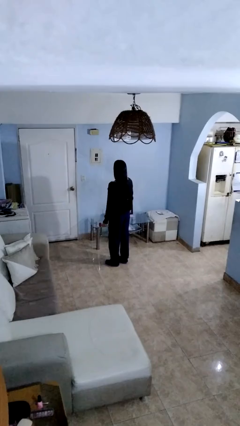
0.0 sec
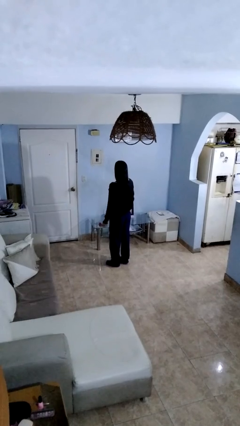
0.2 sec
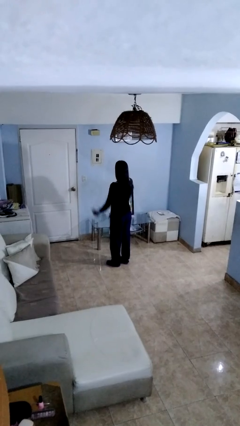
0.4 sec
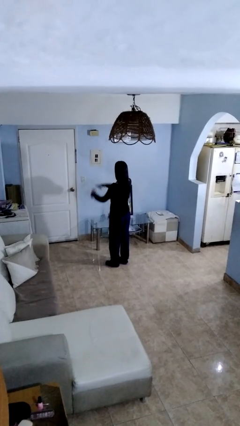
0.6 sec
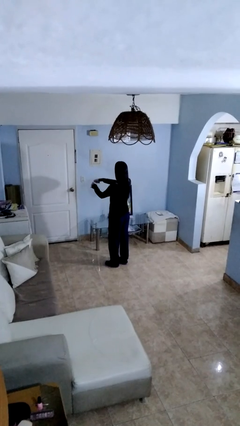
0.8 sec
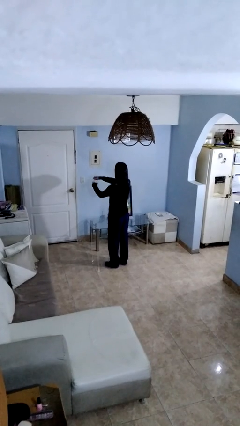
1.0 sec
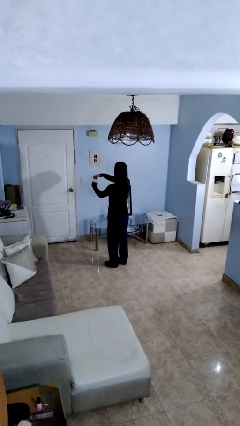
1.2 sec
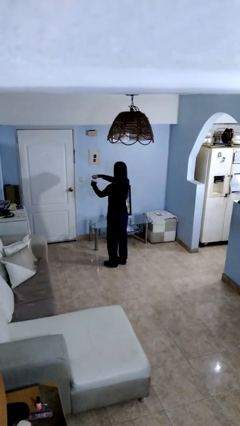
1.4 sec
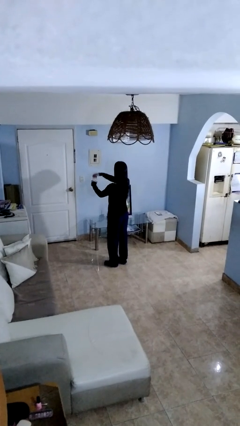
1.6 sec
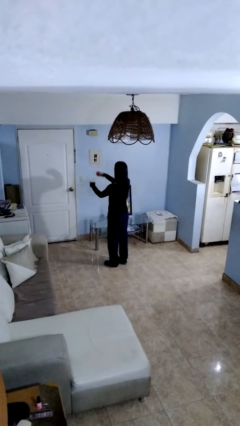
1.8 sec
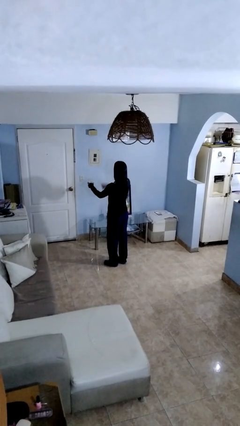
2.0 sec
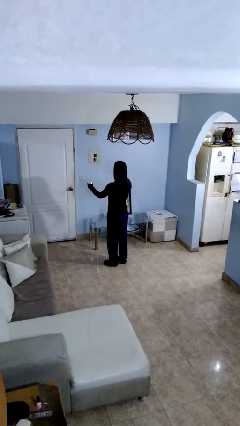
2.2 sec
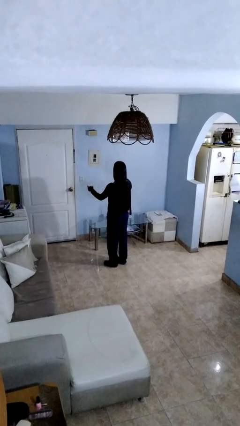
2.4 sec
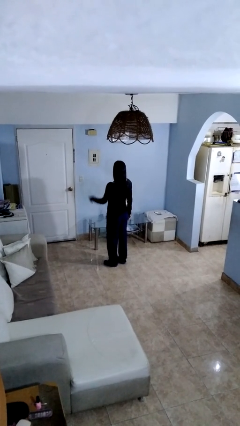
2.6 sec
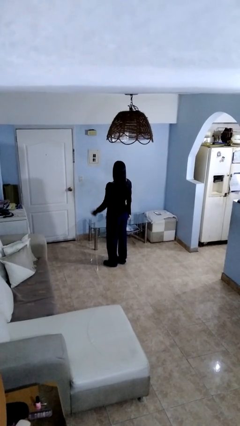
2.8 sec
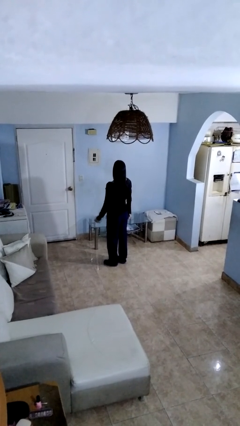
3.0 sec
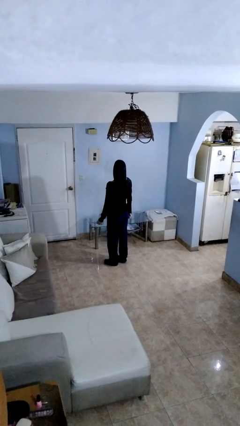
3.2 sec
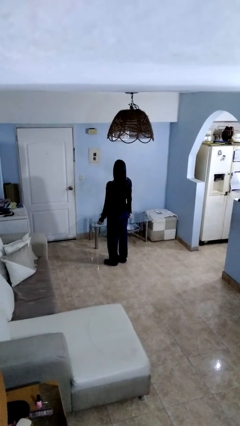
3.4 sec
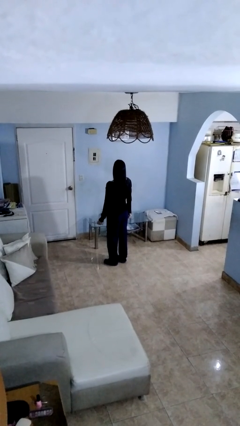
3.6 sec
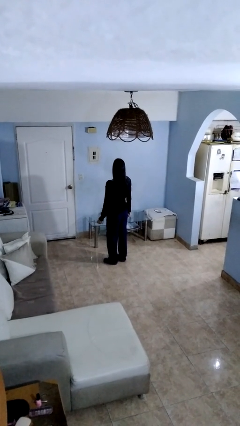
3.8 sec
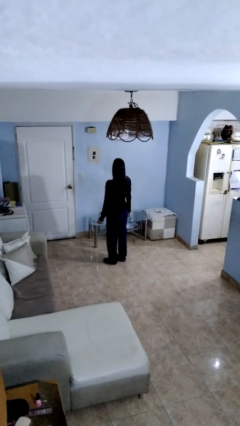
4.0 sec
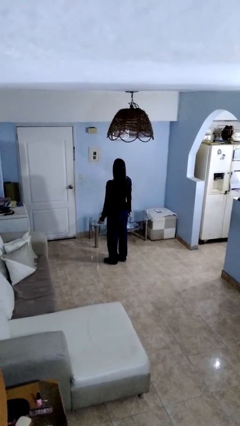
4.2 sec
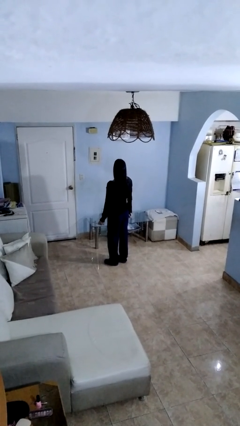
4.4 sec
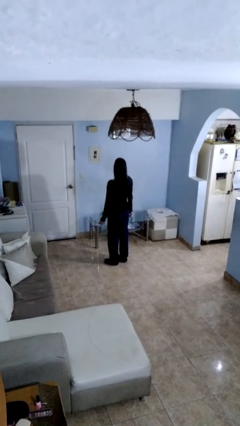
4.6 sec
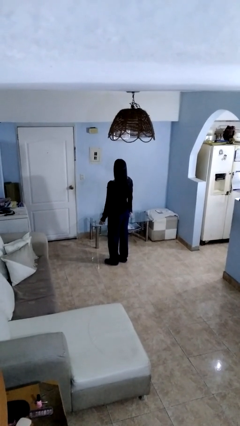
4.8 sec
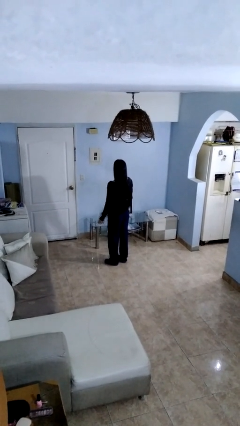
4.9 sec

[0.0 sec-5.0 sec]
person opens jar

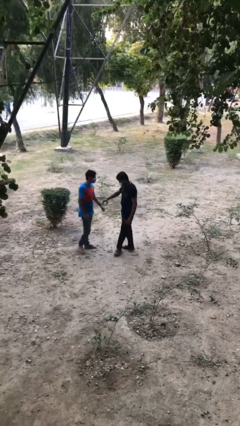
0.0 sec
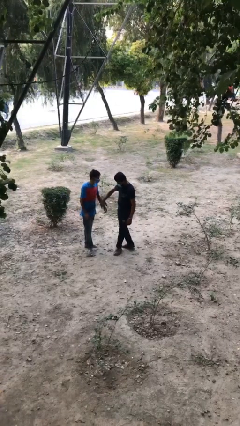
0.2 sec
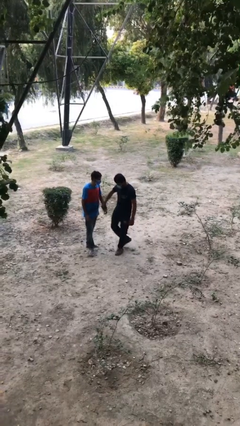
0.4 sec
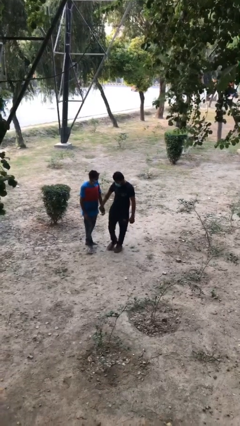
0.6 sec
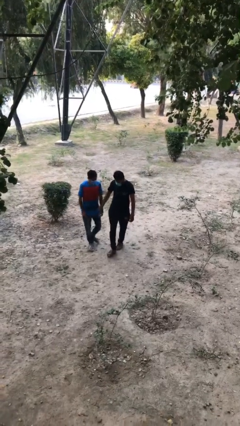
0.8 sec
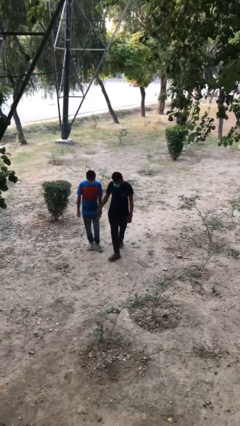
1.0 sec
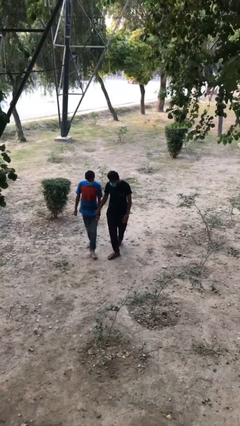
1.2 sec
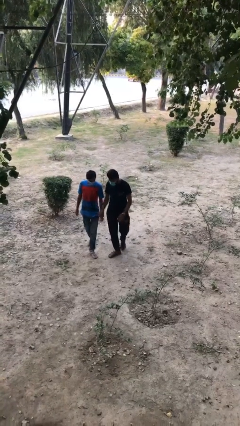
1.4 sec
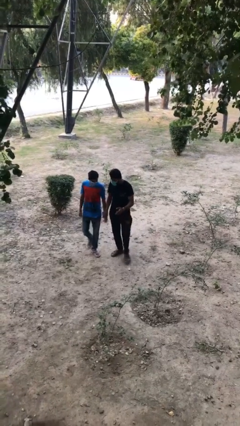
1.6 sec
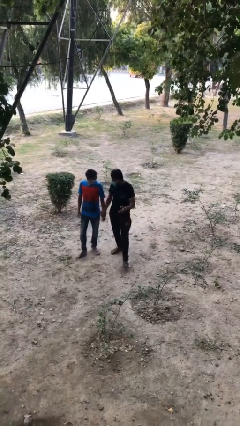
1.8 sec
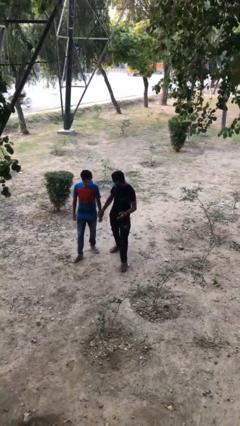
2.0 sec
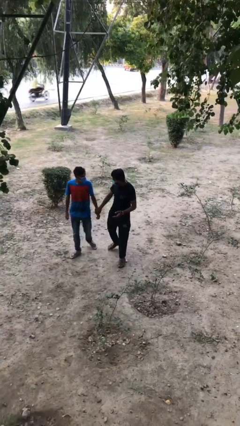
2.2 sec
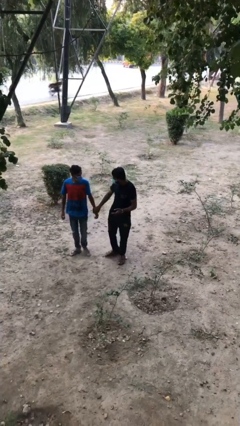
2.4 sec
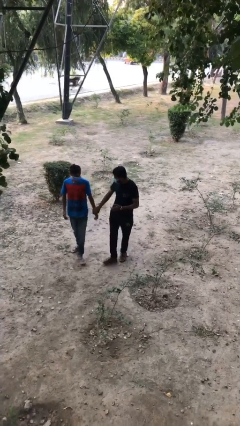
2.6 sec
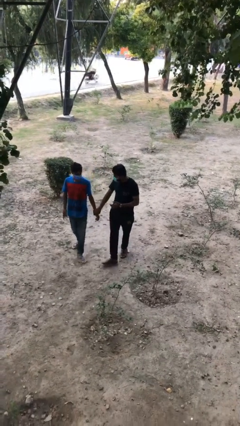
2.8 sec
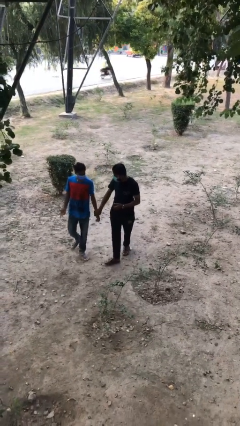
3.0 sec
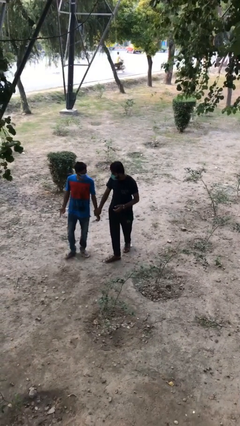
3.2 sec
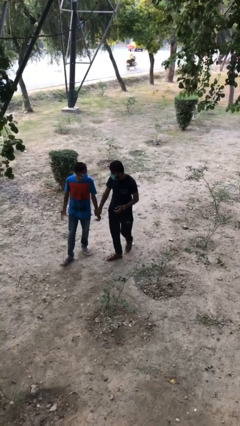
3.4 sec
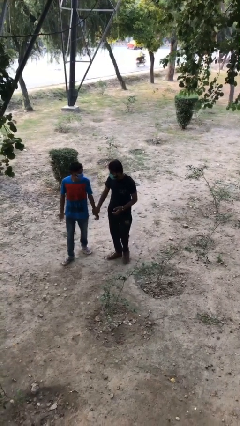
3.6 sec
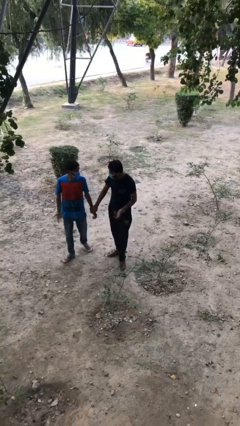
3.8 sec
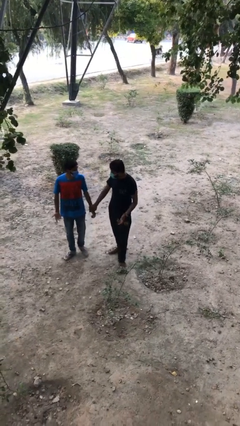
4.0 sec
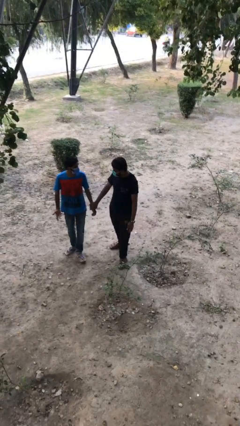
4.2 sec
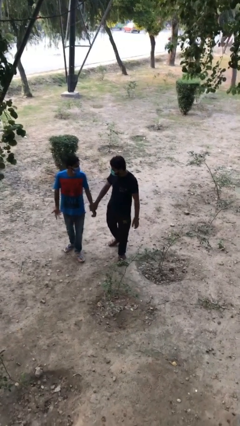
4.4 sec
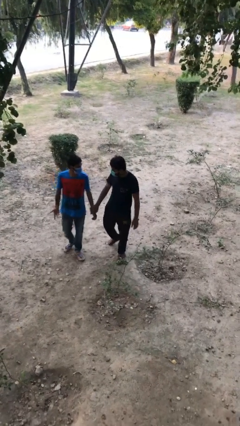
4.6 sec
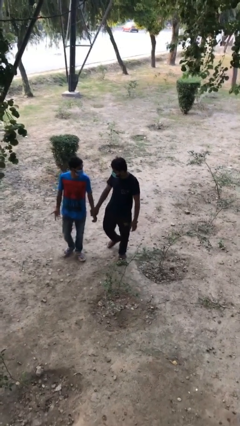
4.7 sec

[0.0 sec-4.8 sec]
person holds hand

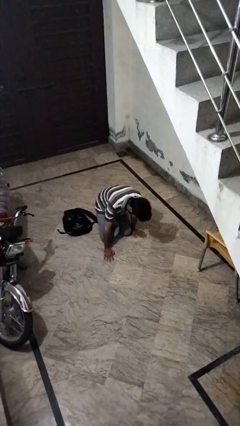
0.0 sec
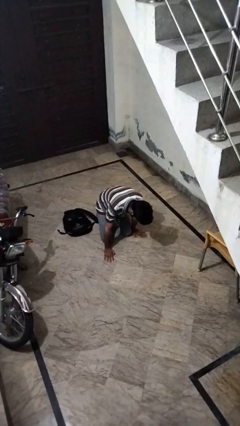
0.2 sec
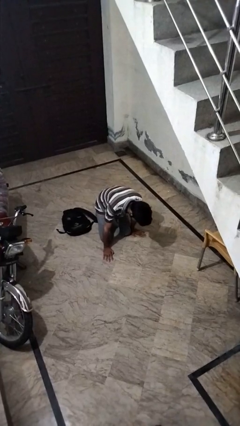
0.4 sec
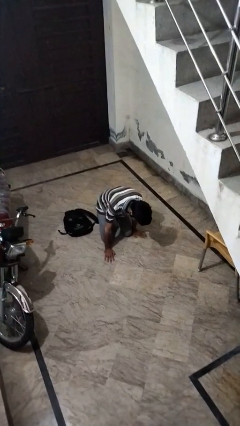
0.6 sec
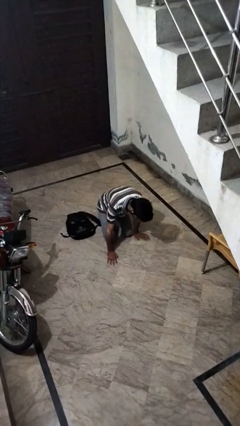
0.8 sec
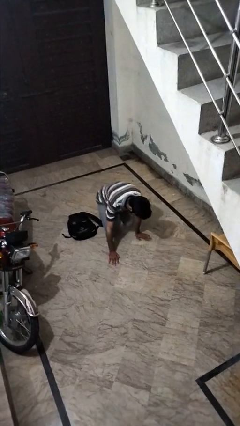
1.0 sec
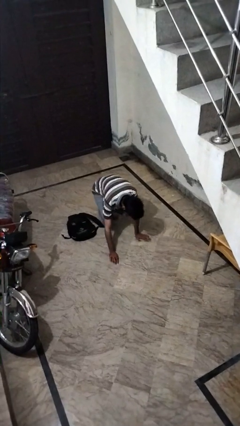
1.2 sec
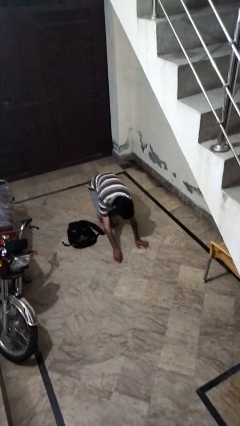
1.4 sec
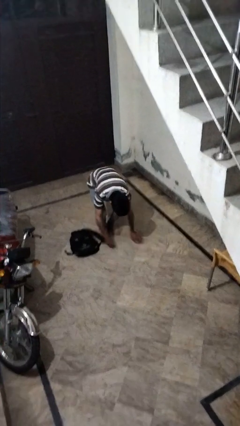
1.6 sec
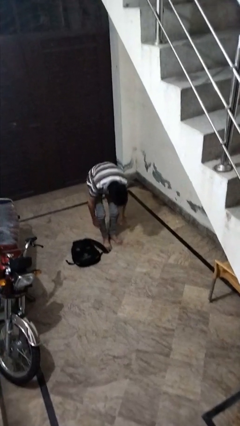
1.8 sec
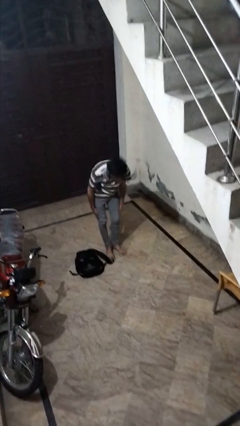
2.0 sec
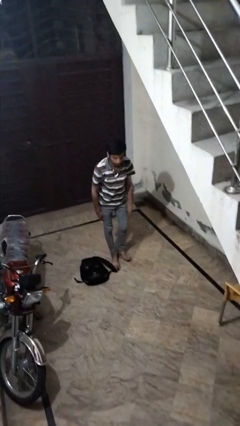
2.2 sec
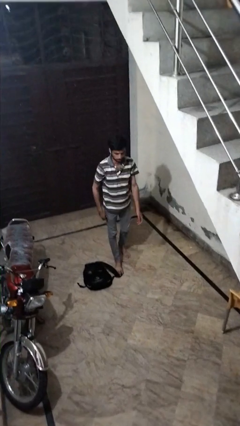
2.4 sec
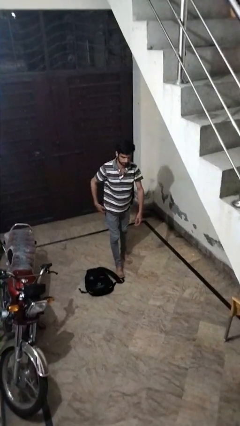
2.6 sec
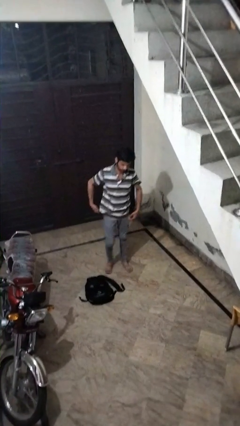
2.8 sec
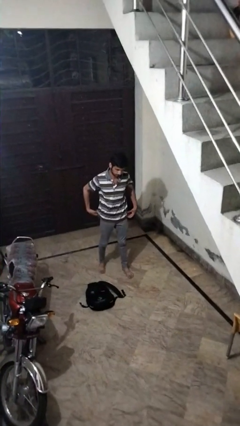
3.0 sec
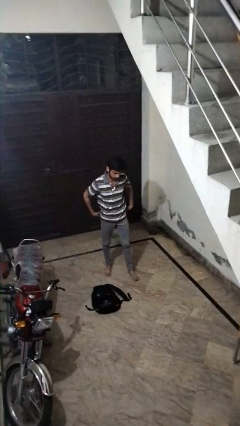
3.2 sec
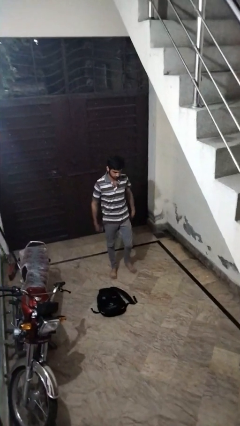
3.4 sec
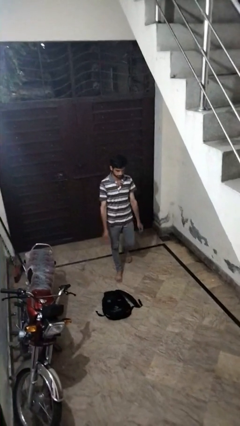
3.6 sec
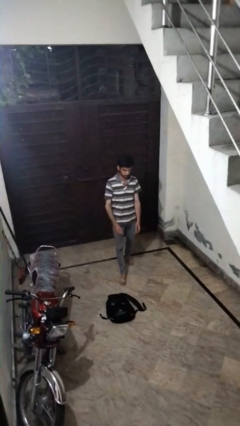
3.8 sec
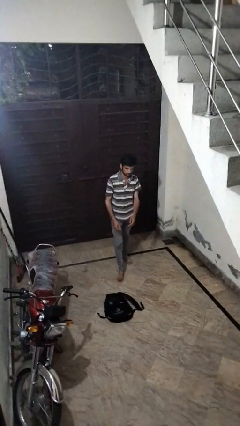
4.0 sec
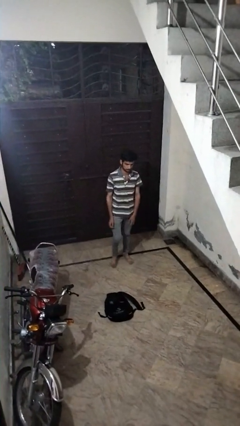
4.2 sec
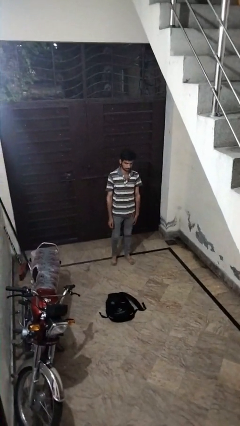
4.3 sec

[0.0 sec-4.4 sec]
person stands up from floor

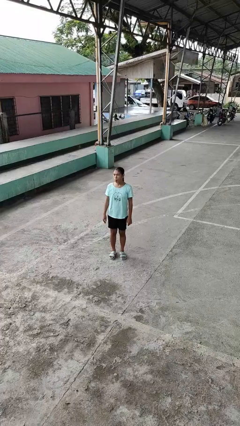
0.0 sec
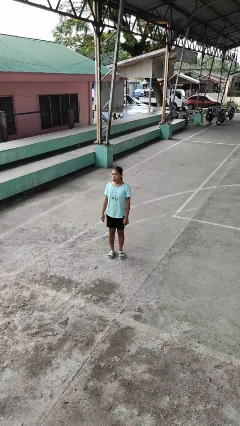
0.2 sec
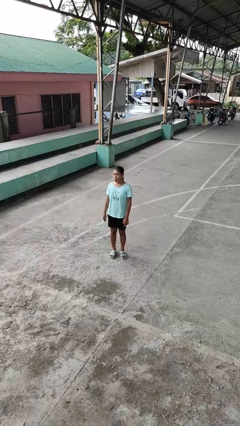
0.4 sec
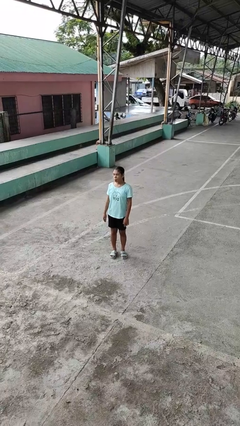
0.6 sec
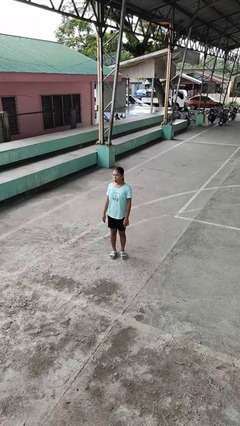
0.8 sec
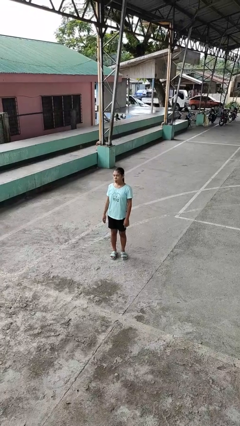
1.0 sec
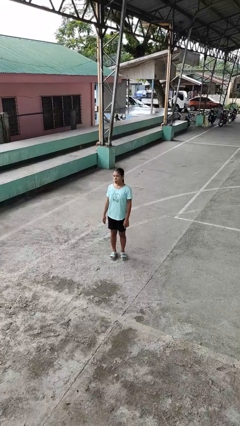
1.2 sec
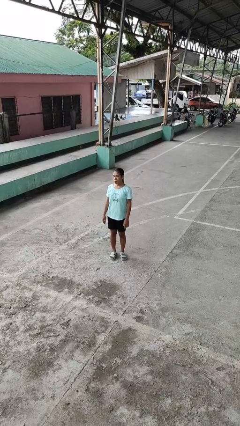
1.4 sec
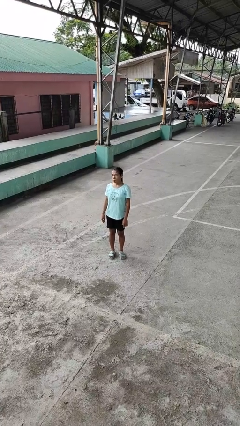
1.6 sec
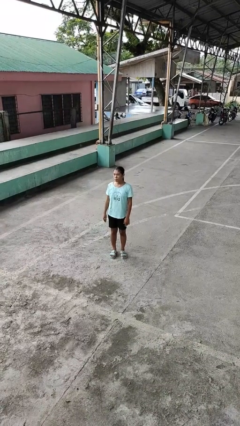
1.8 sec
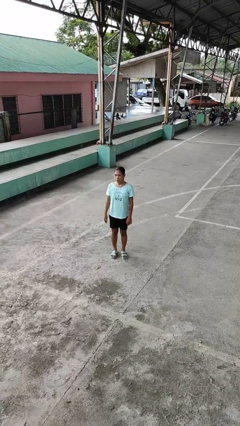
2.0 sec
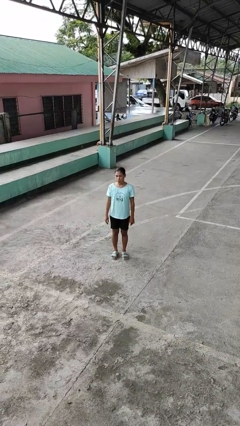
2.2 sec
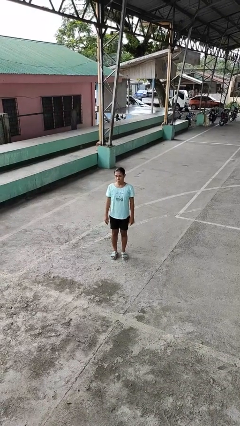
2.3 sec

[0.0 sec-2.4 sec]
person sticks out tongue

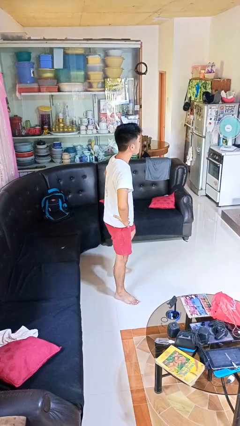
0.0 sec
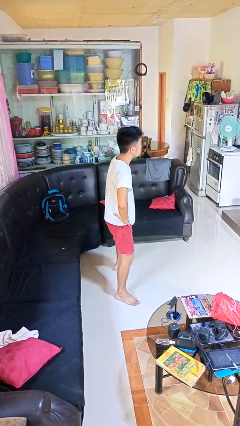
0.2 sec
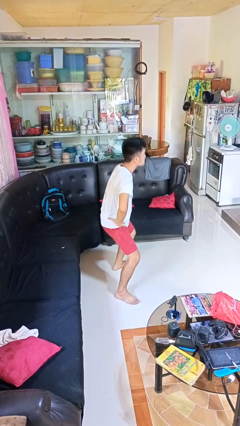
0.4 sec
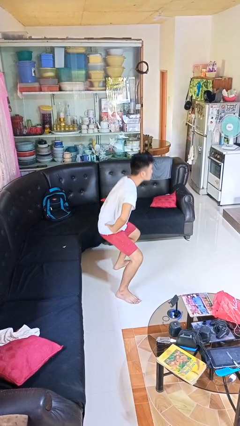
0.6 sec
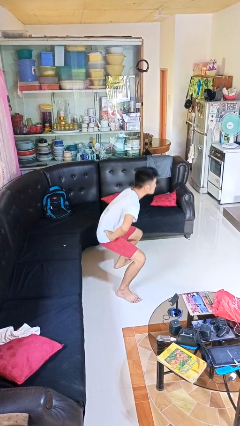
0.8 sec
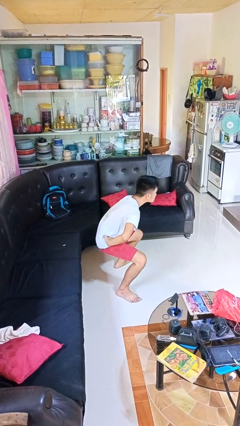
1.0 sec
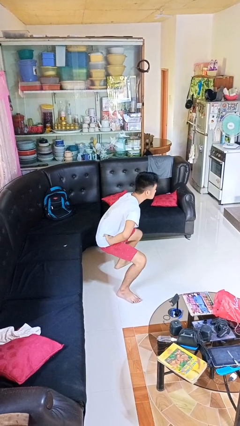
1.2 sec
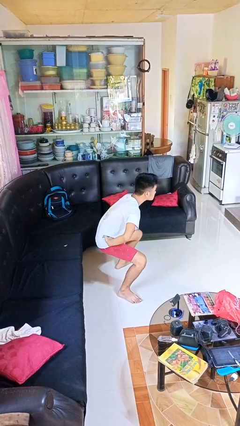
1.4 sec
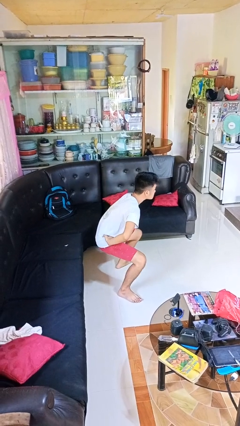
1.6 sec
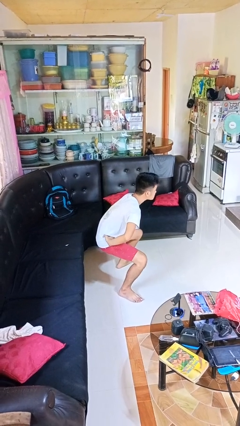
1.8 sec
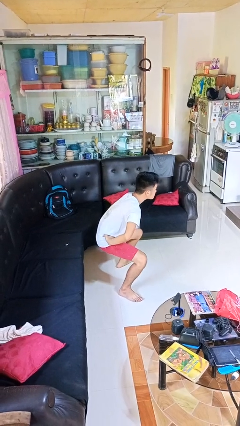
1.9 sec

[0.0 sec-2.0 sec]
person squats
